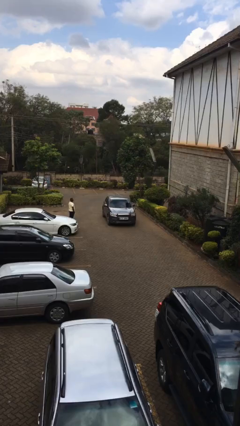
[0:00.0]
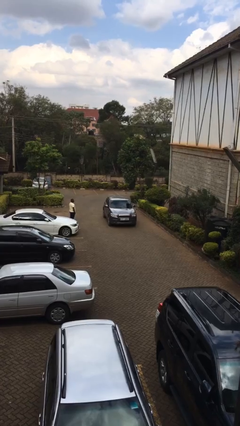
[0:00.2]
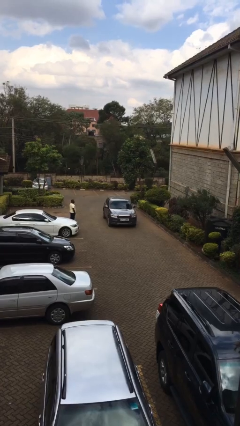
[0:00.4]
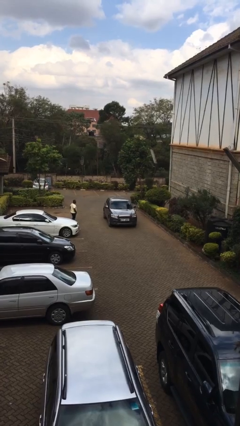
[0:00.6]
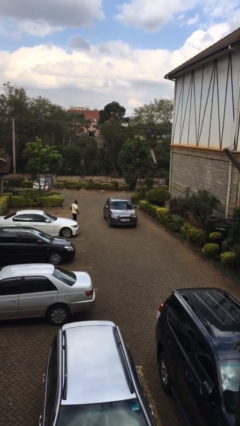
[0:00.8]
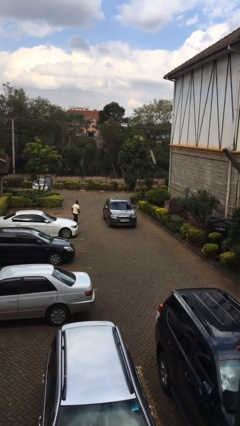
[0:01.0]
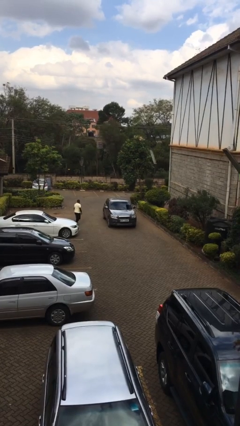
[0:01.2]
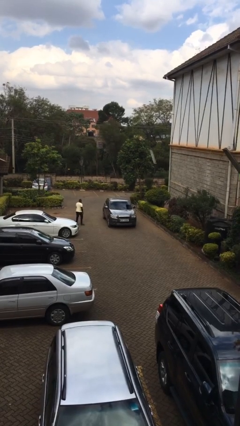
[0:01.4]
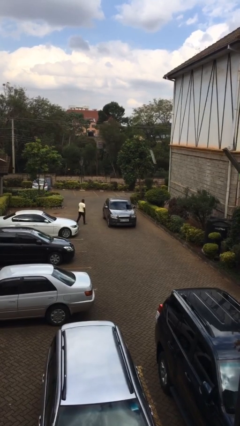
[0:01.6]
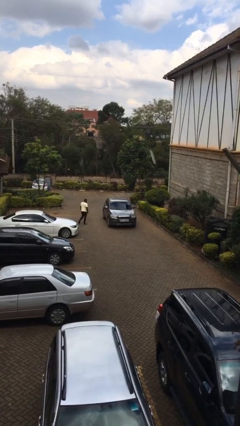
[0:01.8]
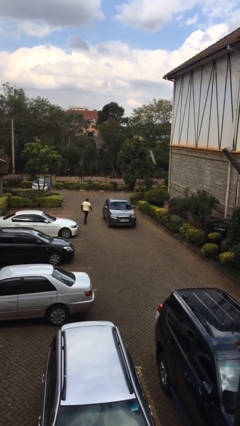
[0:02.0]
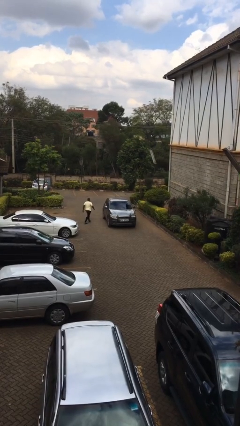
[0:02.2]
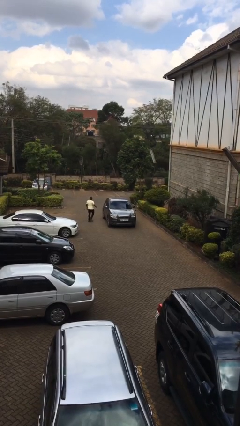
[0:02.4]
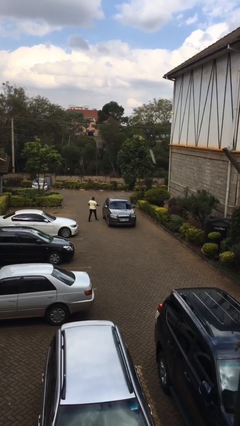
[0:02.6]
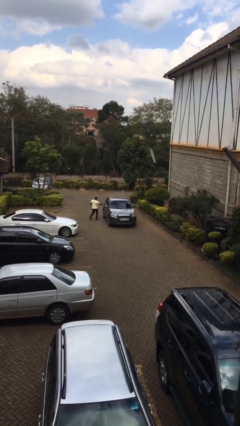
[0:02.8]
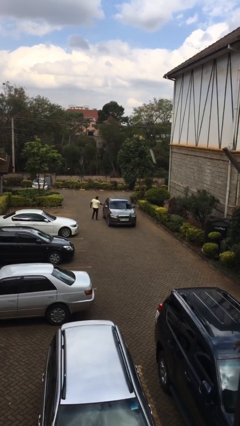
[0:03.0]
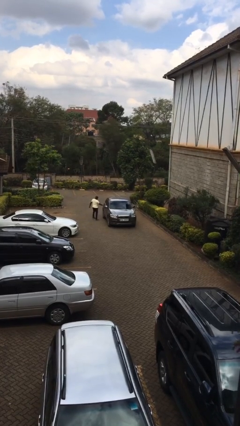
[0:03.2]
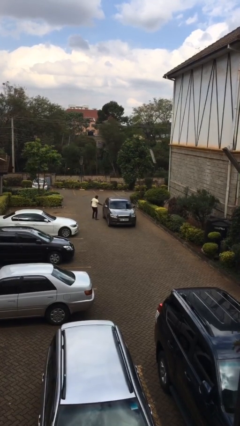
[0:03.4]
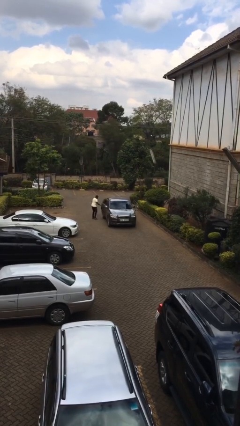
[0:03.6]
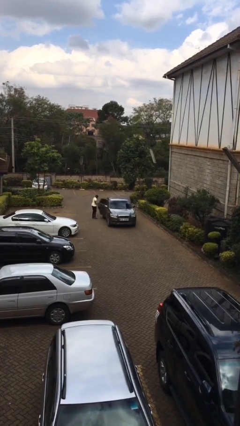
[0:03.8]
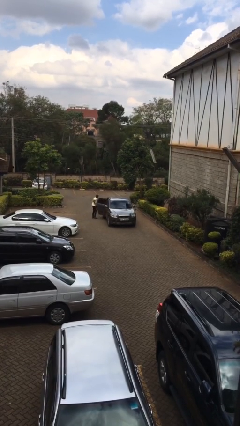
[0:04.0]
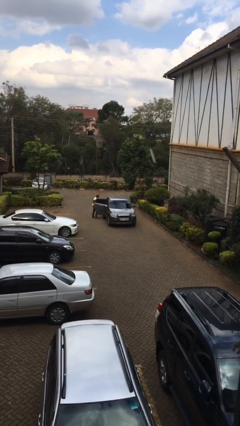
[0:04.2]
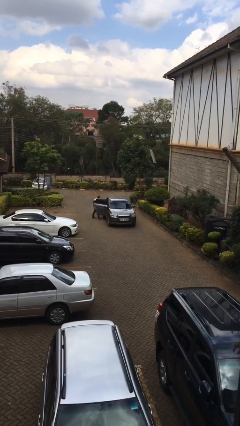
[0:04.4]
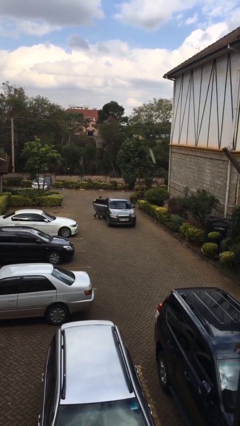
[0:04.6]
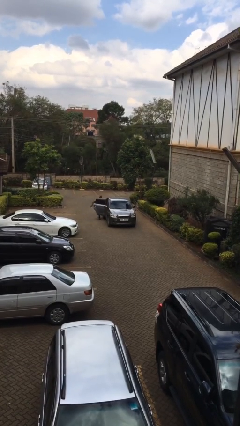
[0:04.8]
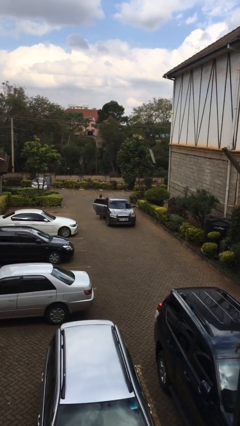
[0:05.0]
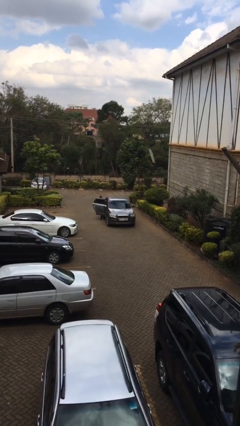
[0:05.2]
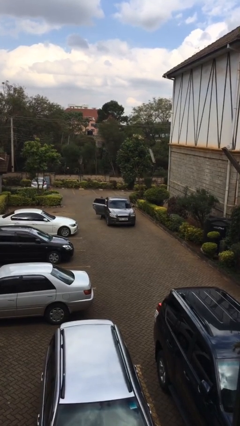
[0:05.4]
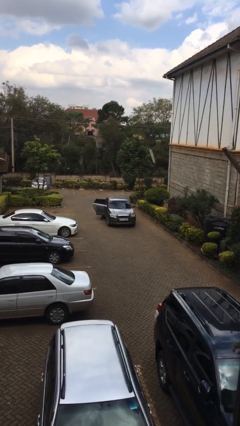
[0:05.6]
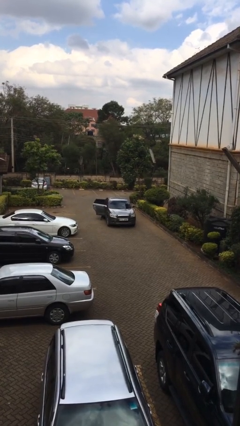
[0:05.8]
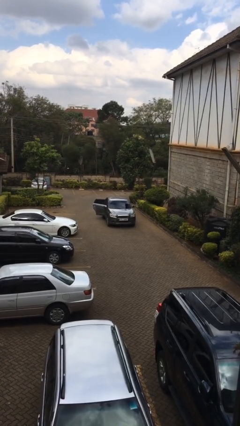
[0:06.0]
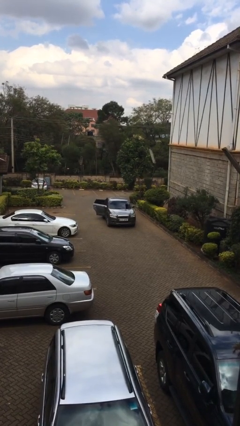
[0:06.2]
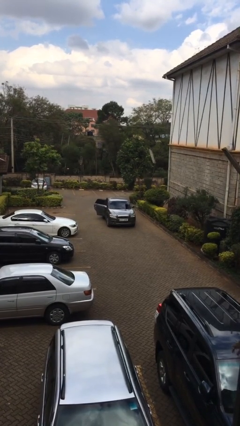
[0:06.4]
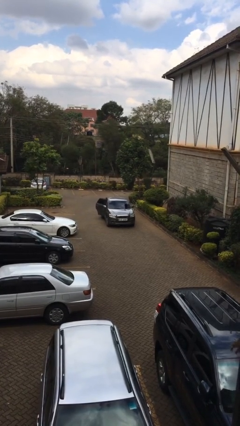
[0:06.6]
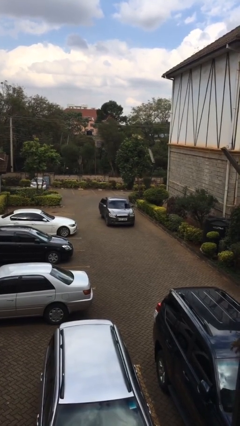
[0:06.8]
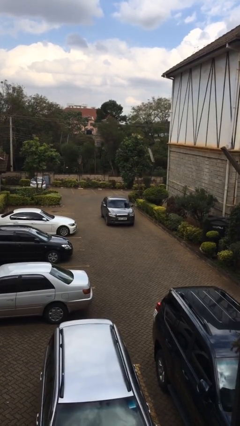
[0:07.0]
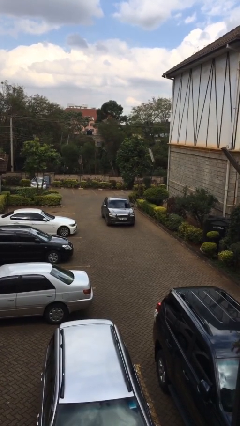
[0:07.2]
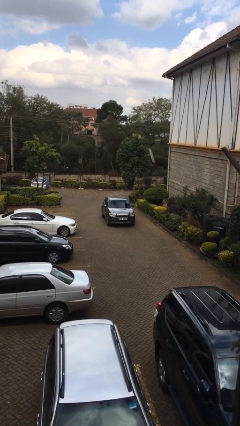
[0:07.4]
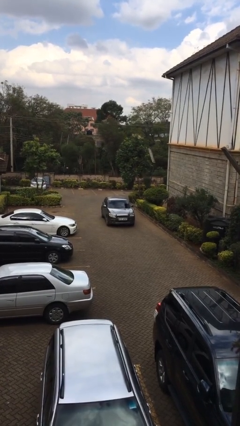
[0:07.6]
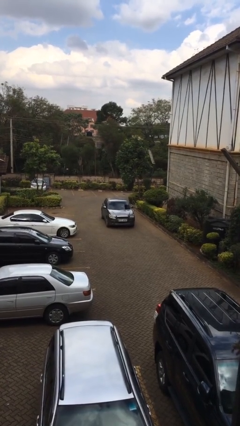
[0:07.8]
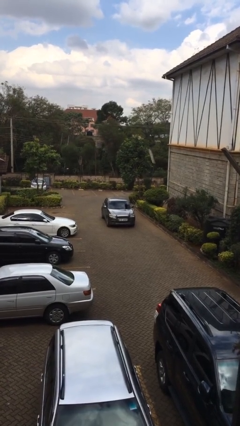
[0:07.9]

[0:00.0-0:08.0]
car picks up person

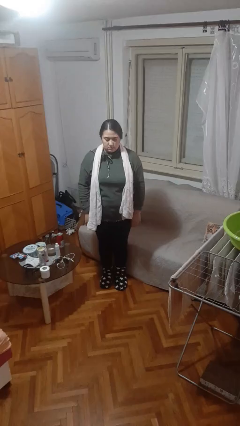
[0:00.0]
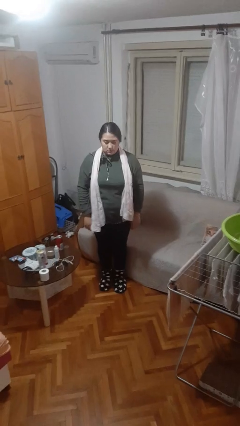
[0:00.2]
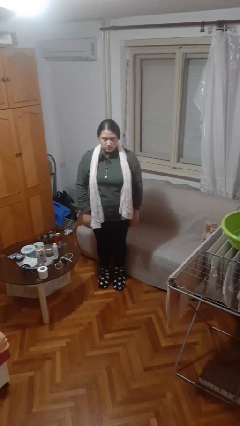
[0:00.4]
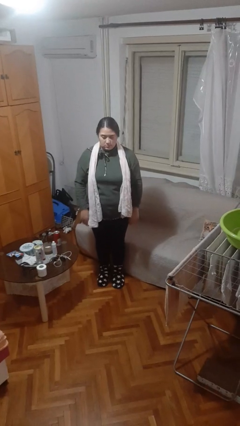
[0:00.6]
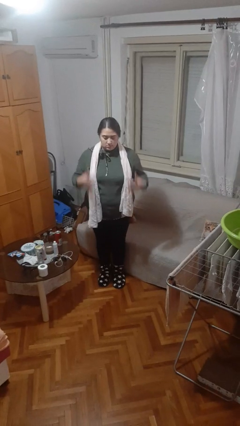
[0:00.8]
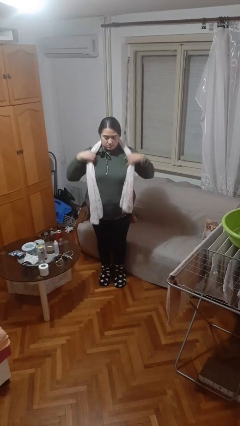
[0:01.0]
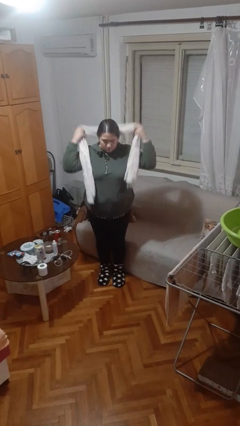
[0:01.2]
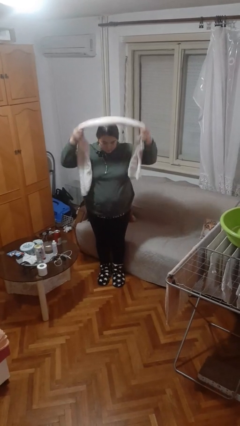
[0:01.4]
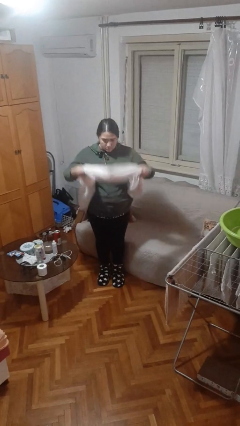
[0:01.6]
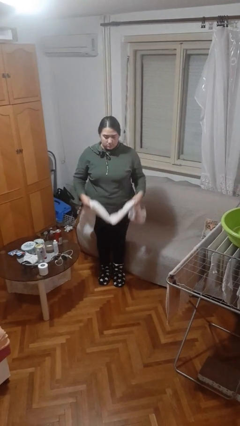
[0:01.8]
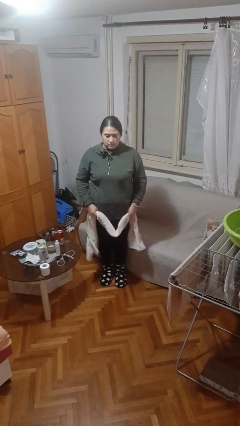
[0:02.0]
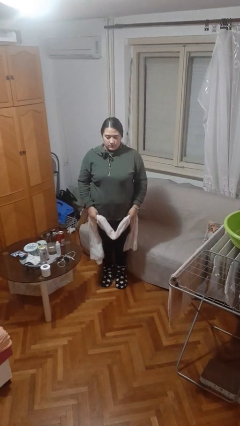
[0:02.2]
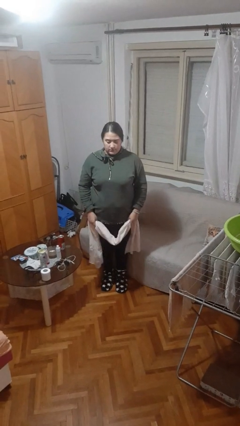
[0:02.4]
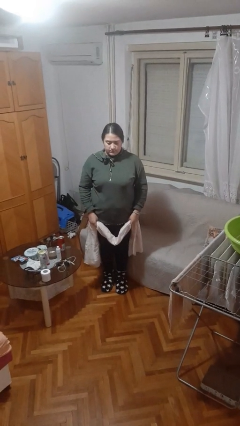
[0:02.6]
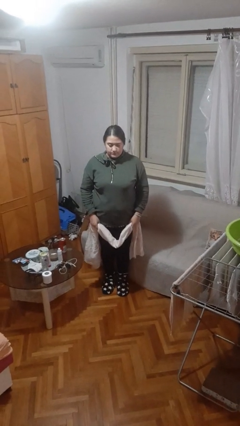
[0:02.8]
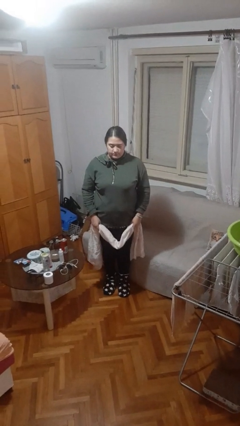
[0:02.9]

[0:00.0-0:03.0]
person takes off scarf

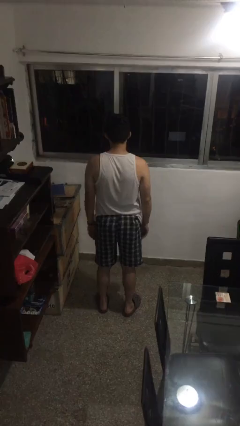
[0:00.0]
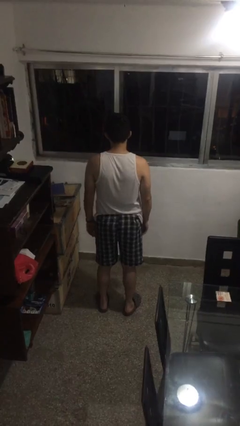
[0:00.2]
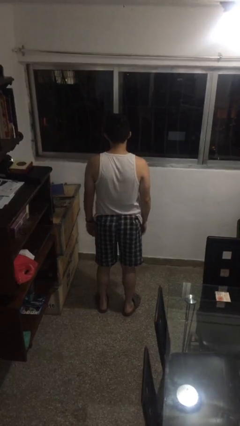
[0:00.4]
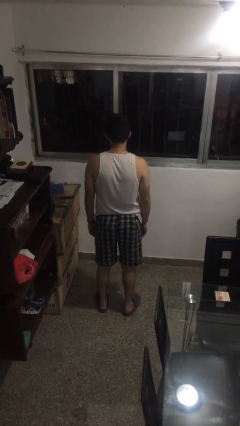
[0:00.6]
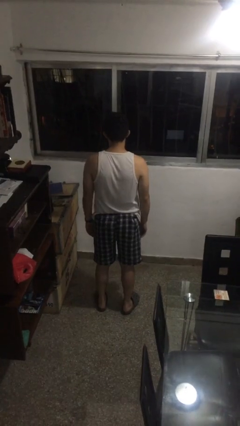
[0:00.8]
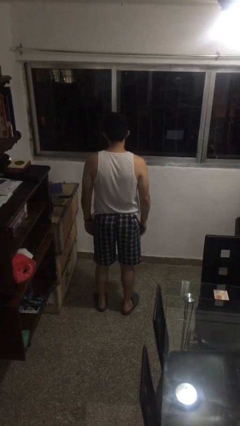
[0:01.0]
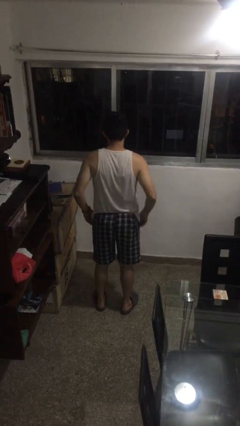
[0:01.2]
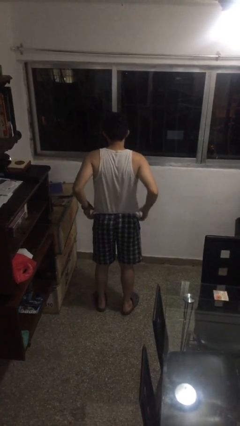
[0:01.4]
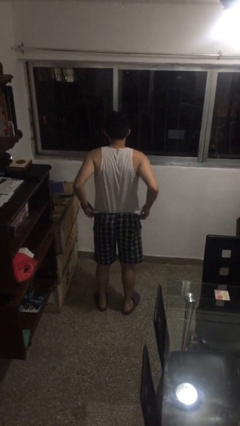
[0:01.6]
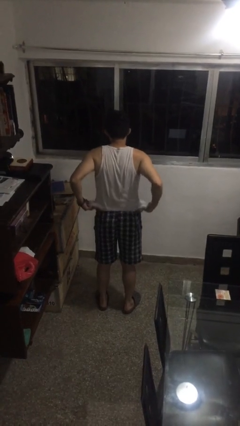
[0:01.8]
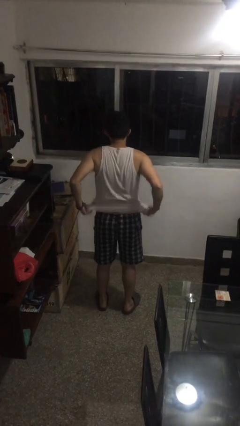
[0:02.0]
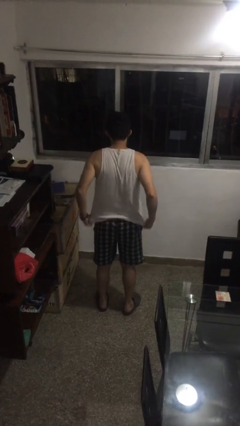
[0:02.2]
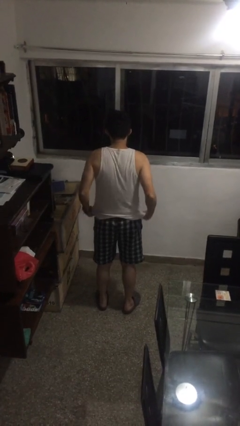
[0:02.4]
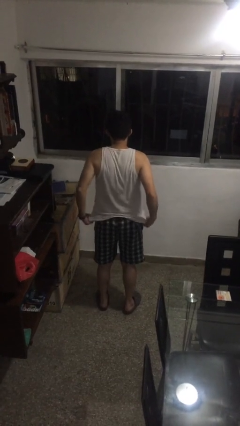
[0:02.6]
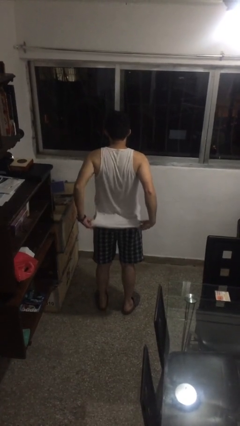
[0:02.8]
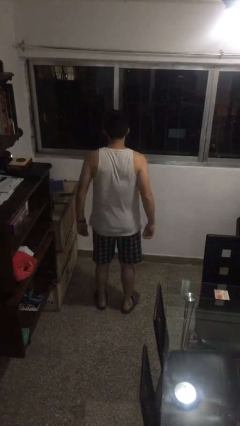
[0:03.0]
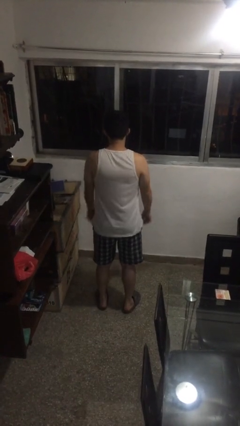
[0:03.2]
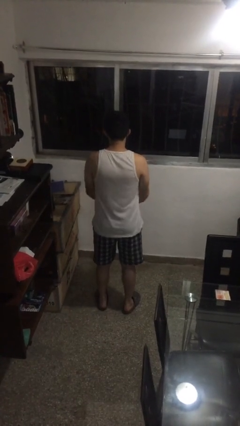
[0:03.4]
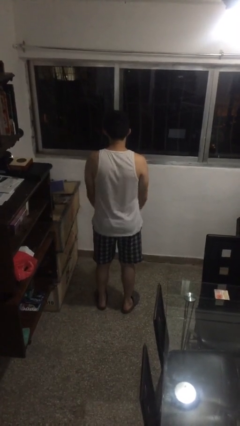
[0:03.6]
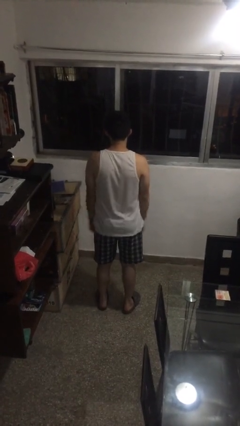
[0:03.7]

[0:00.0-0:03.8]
person untucks shirt

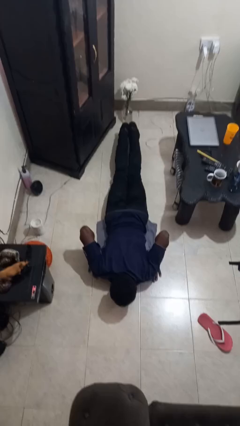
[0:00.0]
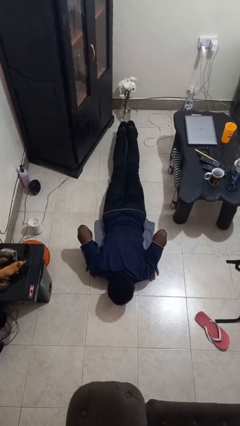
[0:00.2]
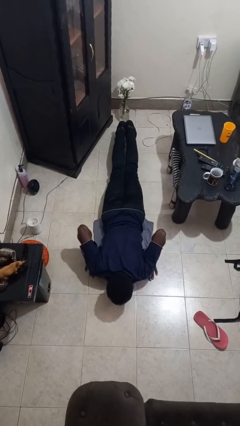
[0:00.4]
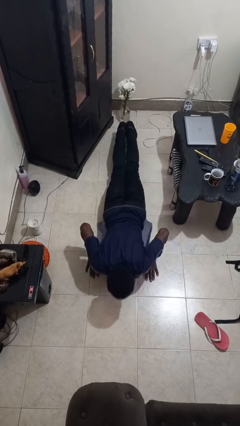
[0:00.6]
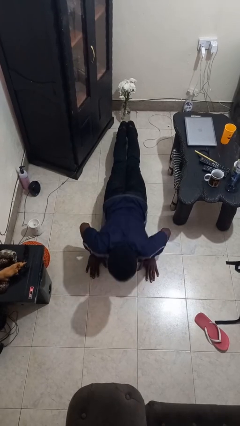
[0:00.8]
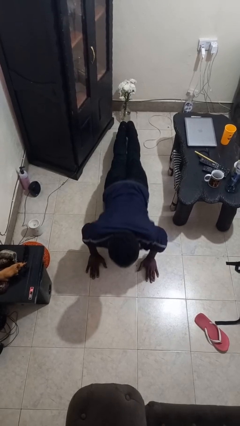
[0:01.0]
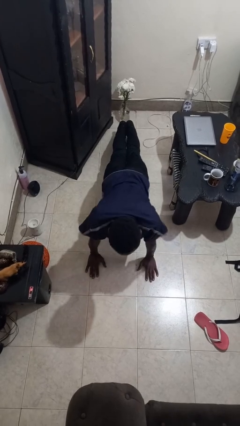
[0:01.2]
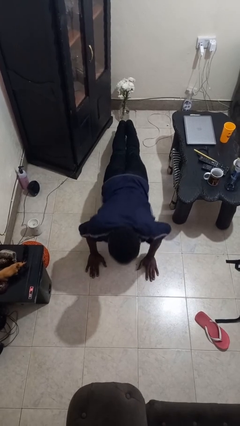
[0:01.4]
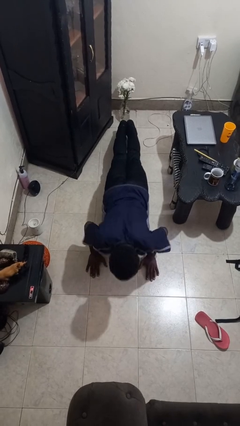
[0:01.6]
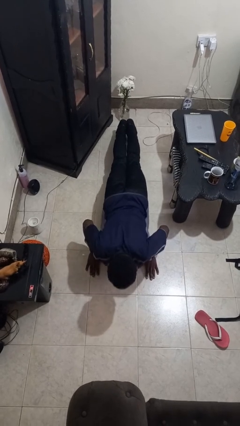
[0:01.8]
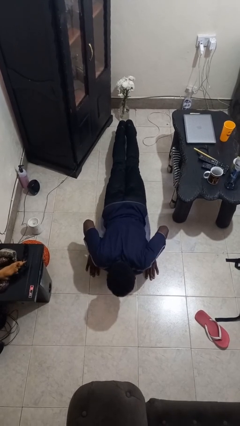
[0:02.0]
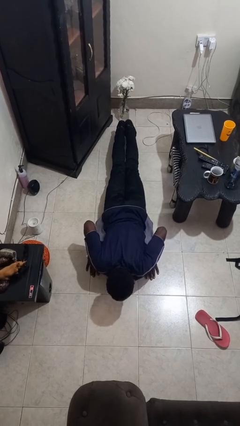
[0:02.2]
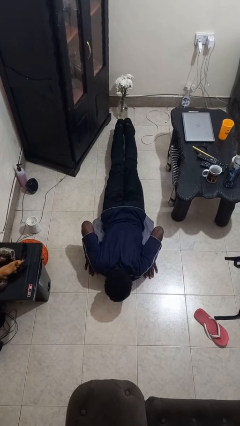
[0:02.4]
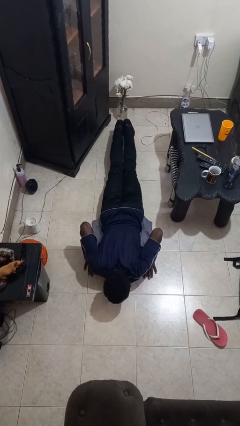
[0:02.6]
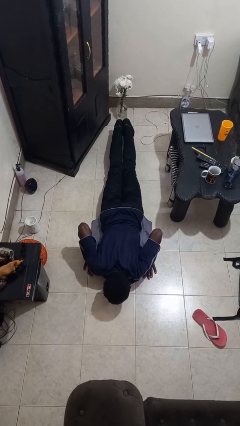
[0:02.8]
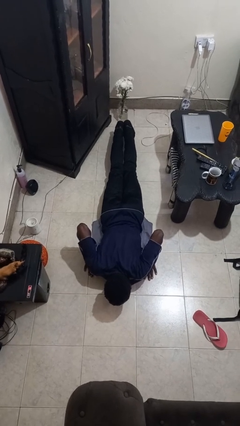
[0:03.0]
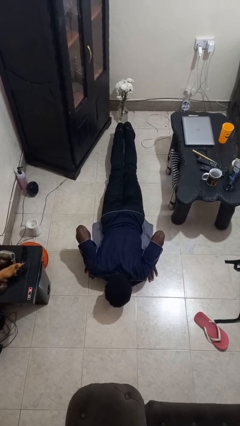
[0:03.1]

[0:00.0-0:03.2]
person exercises with pushup
